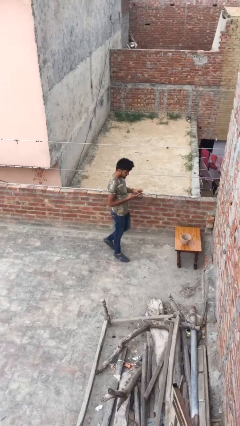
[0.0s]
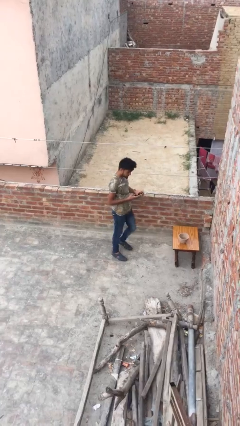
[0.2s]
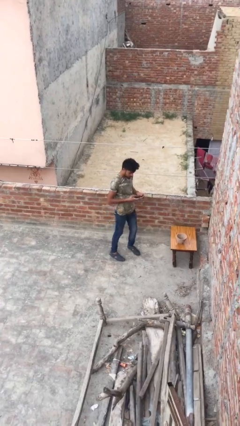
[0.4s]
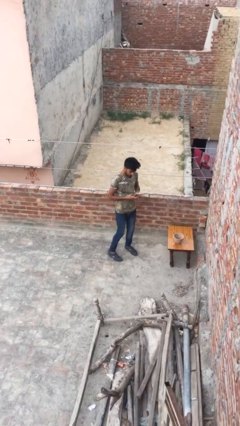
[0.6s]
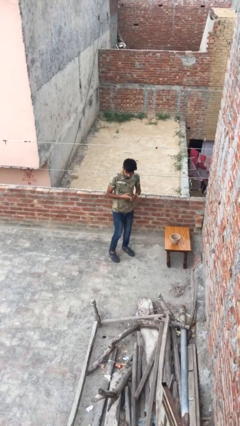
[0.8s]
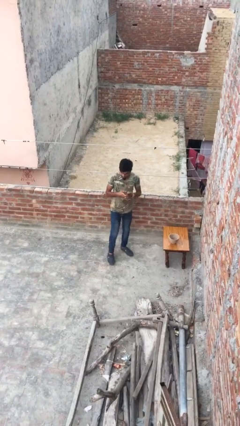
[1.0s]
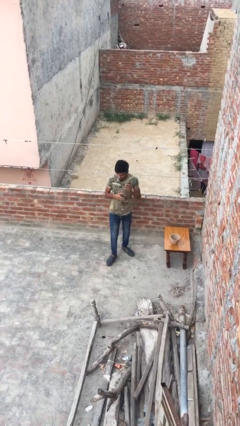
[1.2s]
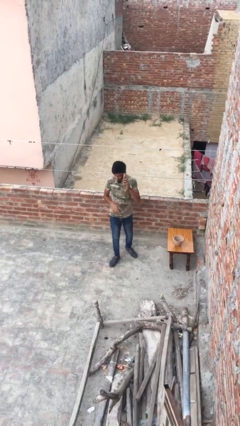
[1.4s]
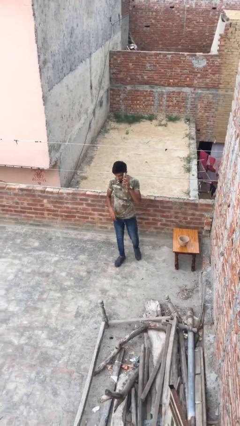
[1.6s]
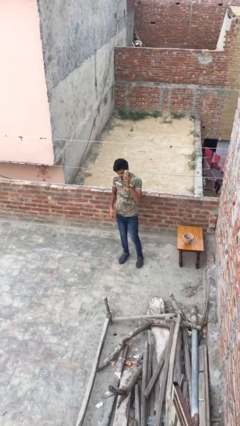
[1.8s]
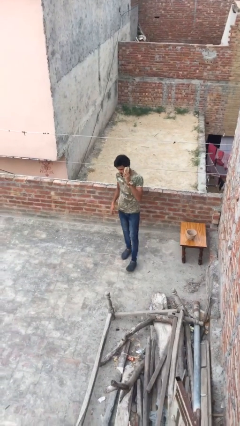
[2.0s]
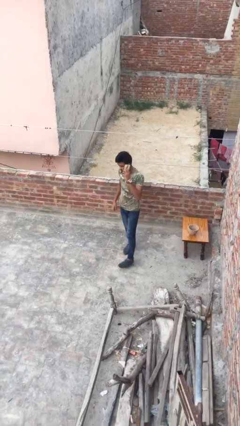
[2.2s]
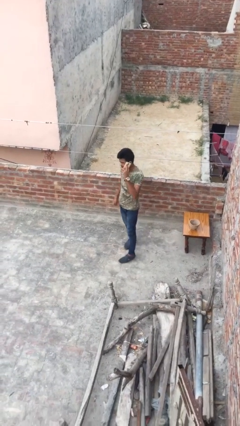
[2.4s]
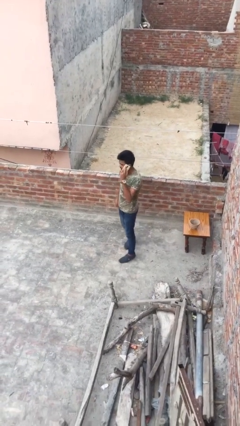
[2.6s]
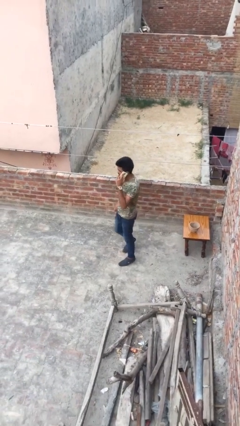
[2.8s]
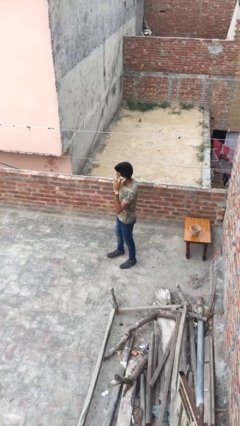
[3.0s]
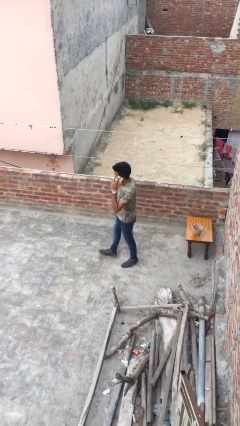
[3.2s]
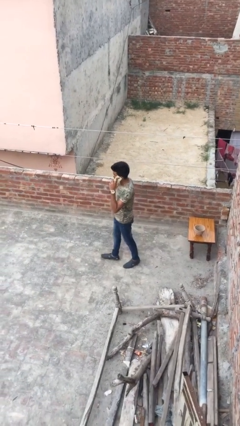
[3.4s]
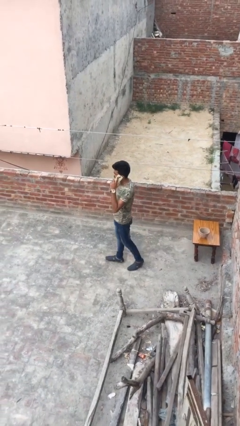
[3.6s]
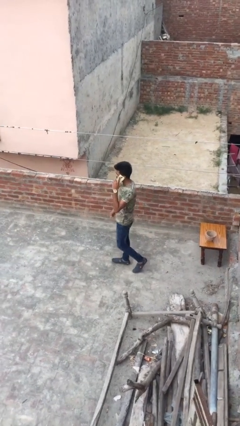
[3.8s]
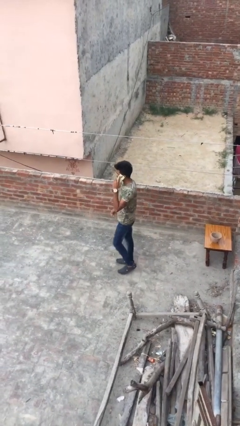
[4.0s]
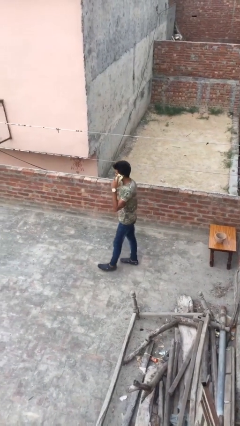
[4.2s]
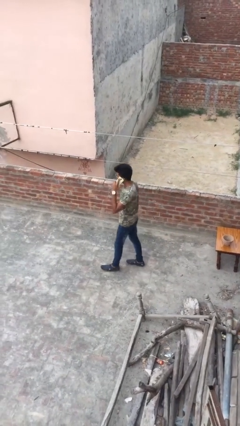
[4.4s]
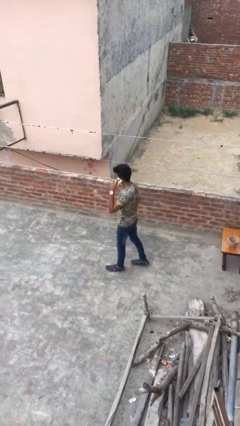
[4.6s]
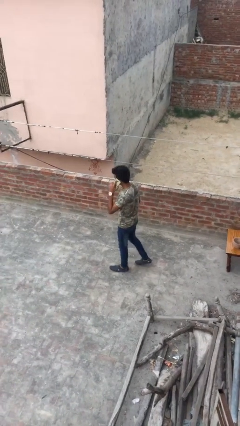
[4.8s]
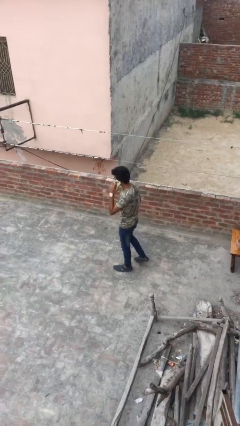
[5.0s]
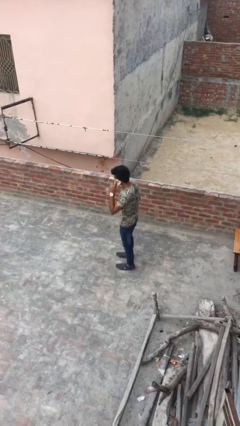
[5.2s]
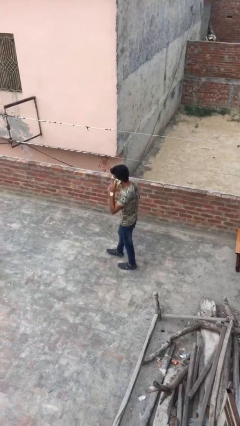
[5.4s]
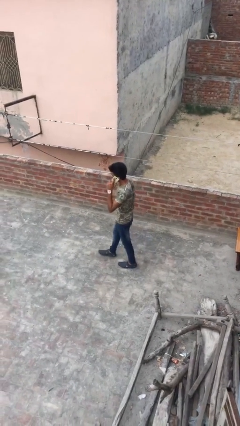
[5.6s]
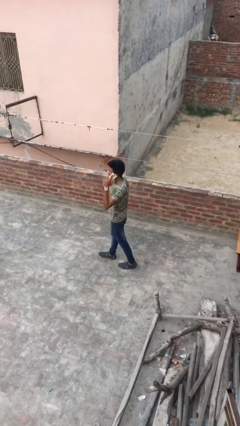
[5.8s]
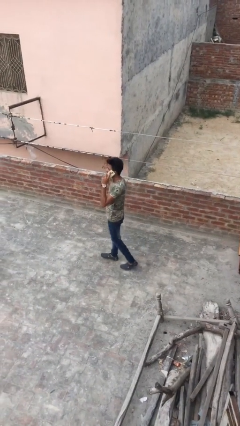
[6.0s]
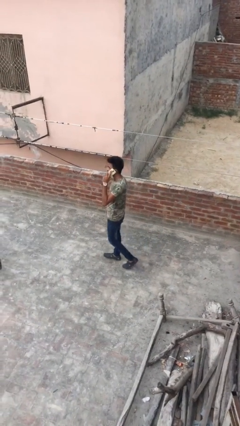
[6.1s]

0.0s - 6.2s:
person talks on phone

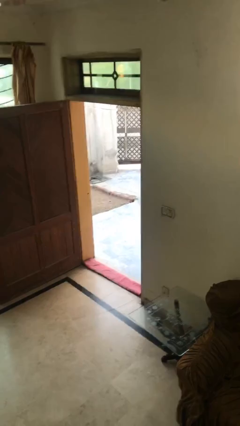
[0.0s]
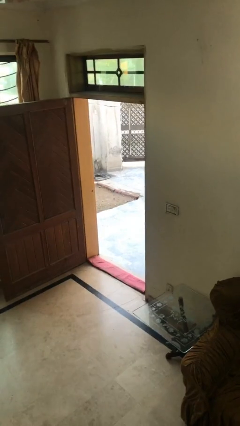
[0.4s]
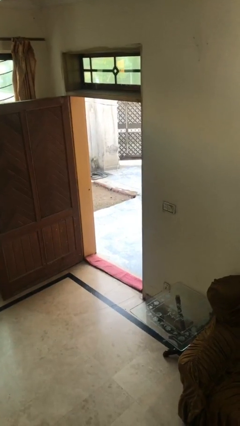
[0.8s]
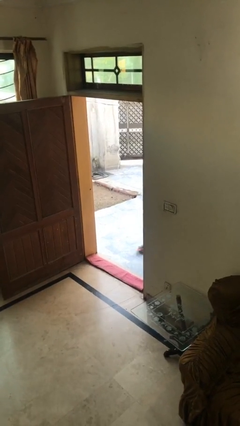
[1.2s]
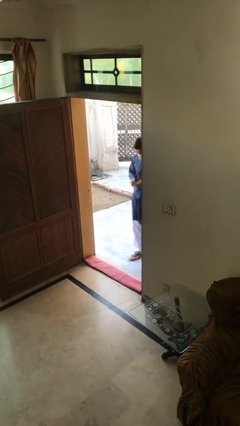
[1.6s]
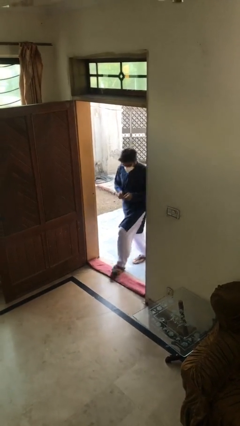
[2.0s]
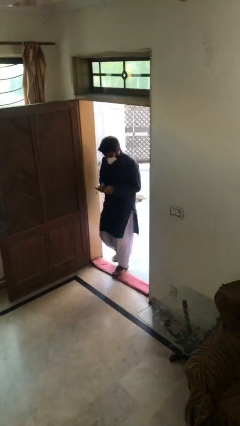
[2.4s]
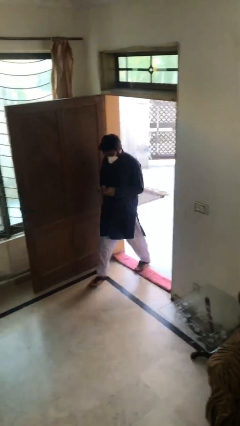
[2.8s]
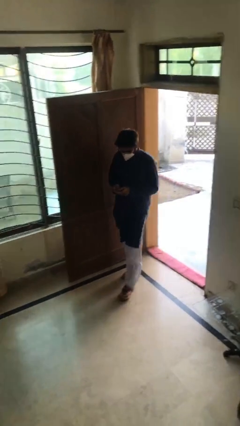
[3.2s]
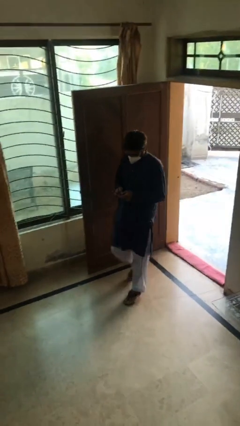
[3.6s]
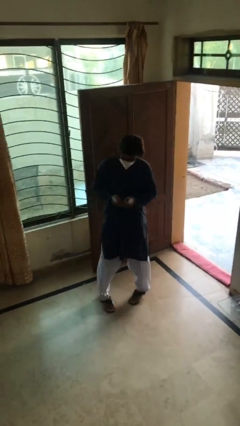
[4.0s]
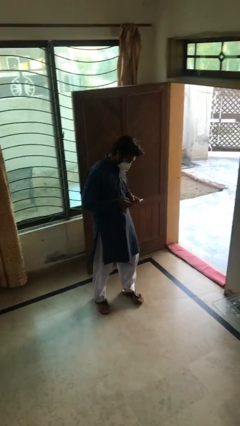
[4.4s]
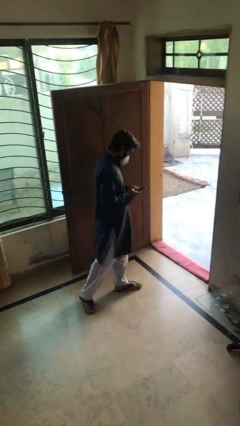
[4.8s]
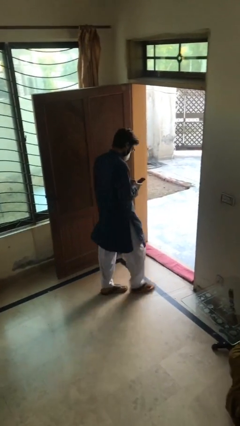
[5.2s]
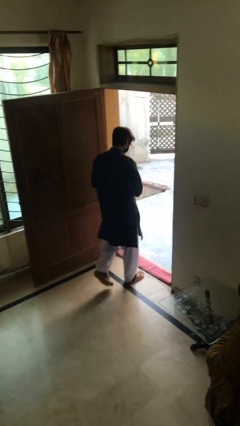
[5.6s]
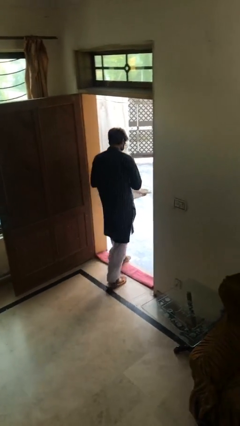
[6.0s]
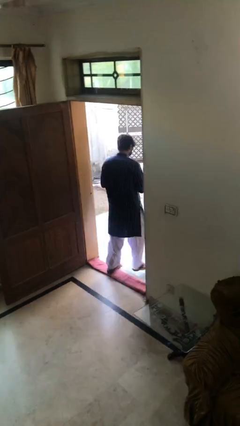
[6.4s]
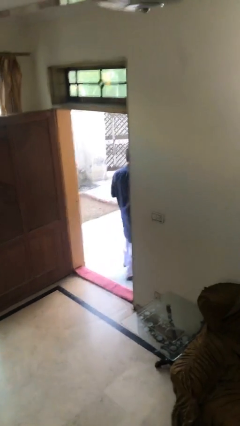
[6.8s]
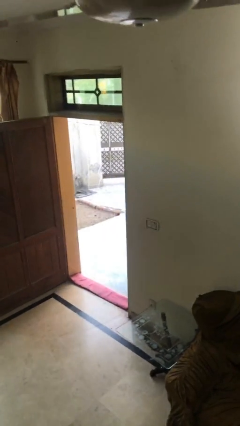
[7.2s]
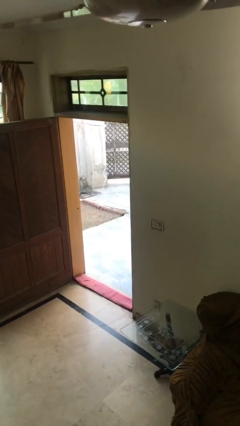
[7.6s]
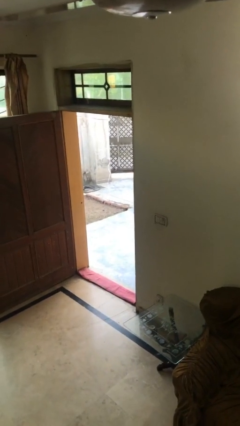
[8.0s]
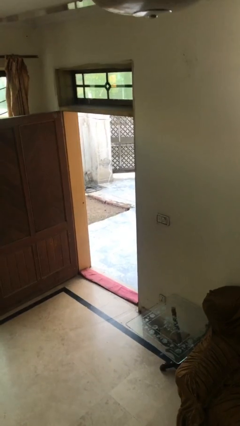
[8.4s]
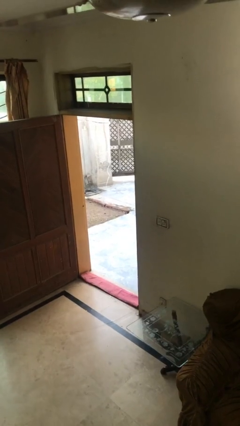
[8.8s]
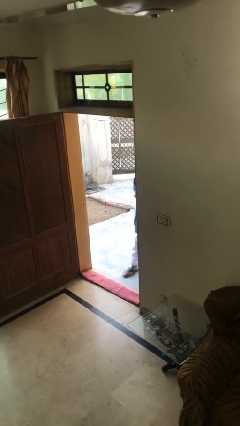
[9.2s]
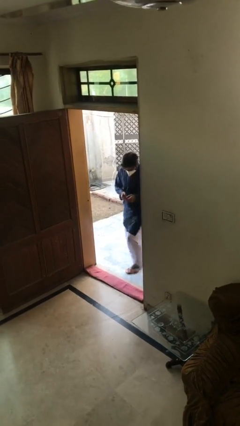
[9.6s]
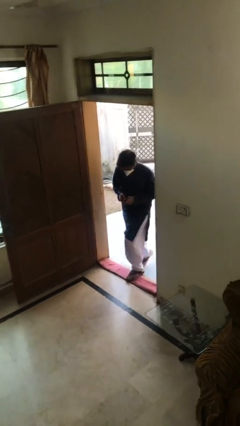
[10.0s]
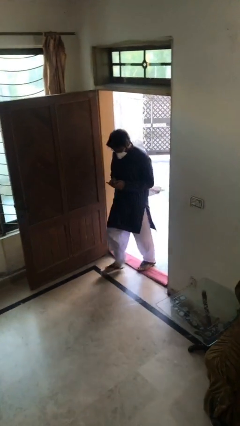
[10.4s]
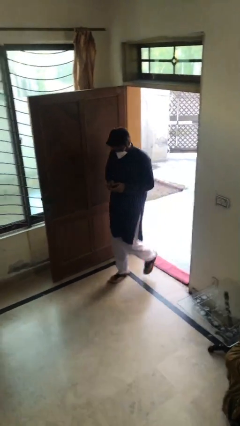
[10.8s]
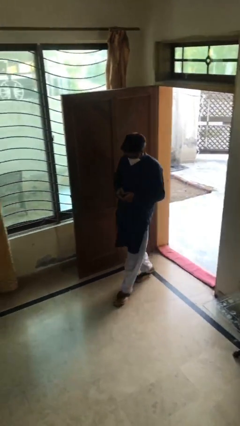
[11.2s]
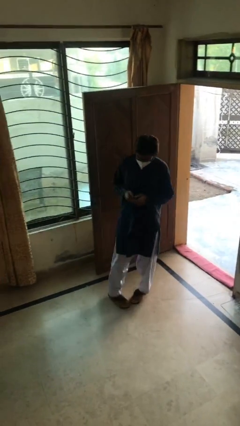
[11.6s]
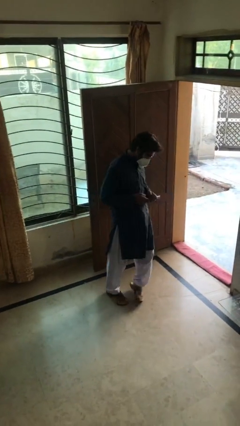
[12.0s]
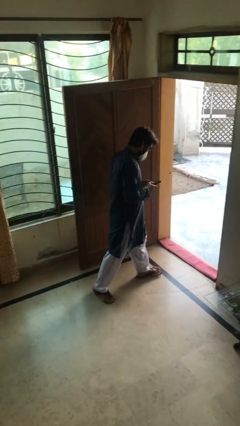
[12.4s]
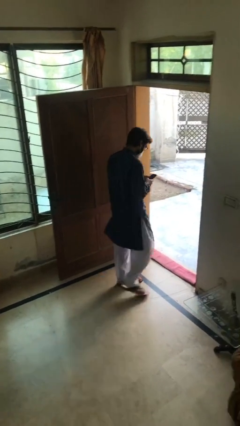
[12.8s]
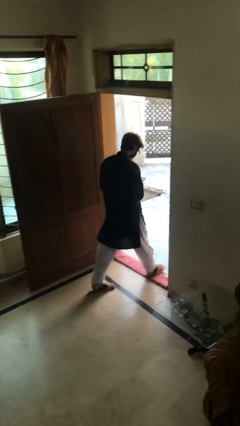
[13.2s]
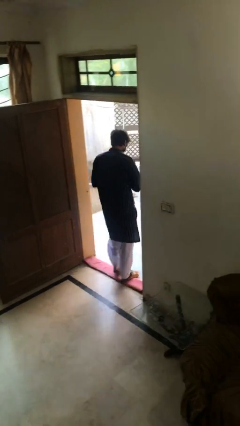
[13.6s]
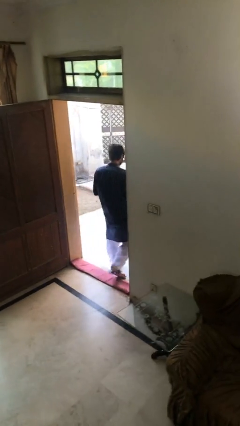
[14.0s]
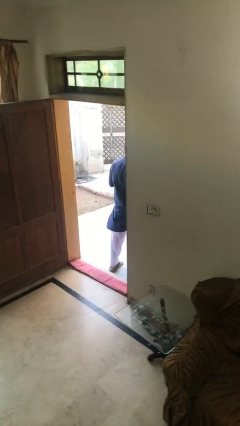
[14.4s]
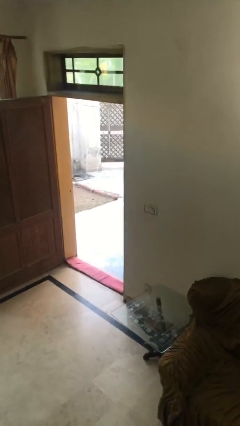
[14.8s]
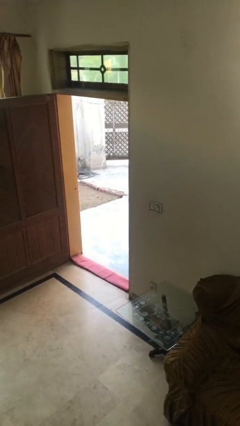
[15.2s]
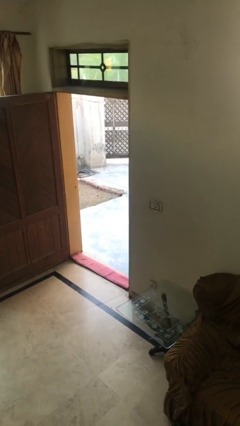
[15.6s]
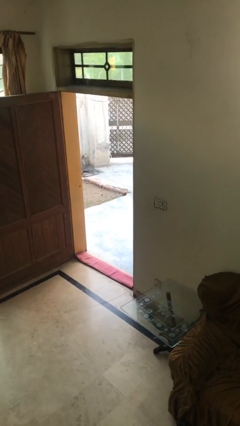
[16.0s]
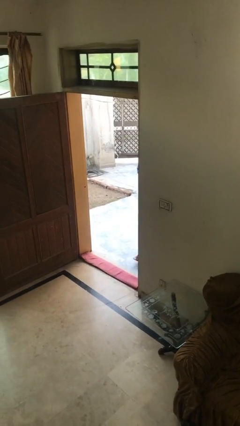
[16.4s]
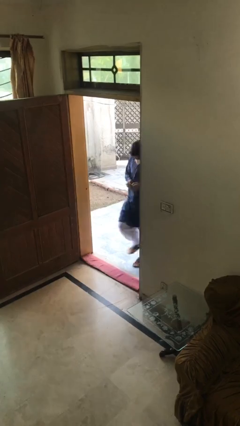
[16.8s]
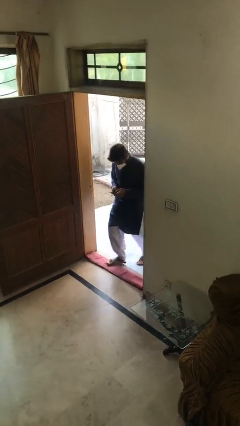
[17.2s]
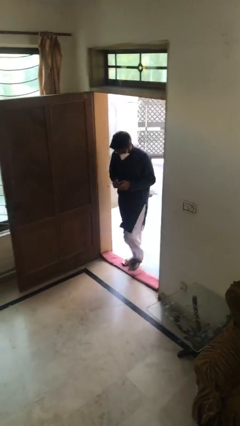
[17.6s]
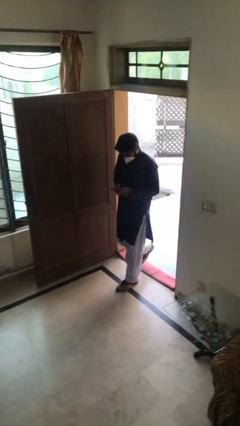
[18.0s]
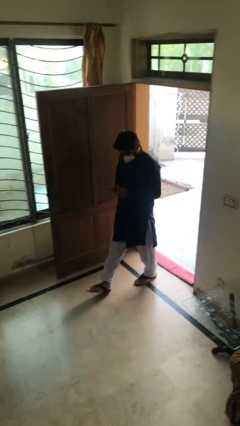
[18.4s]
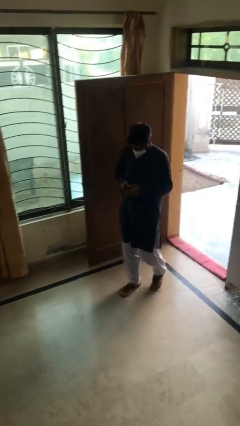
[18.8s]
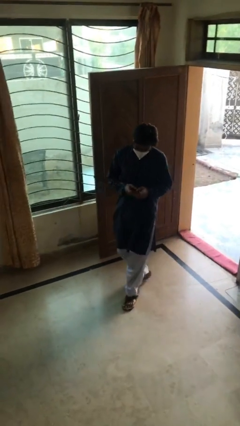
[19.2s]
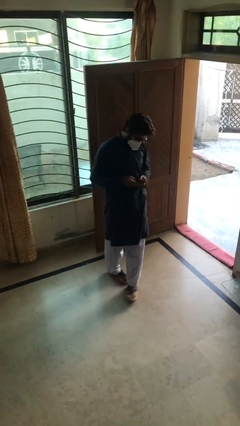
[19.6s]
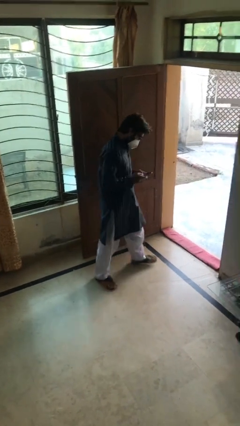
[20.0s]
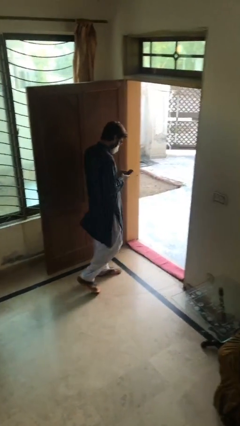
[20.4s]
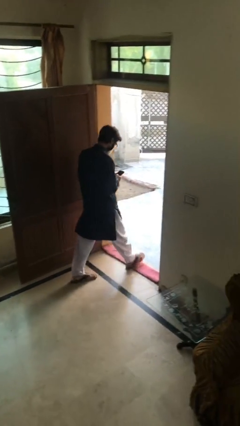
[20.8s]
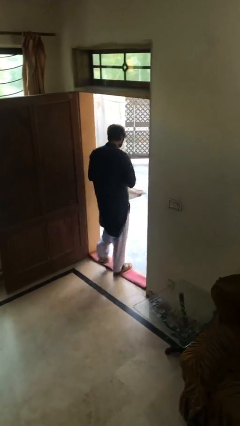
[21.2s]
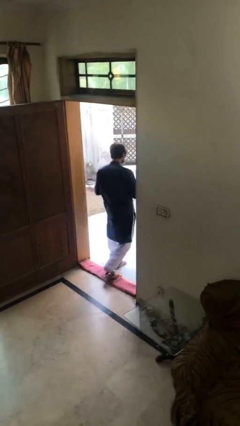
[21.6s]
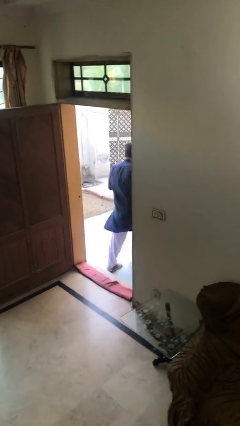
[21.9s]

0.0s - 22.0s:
person texts on phone

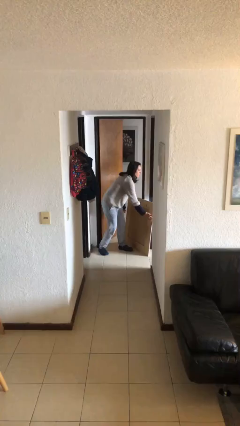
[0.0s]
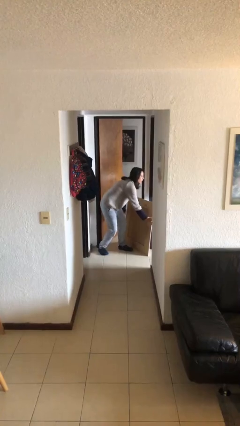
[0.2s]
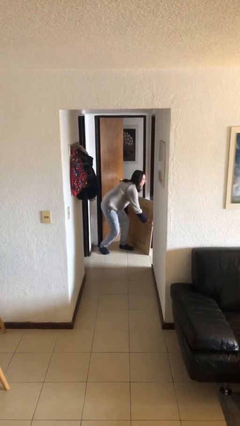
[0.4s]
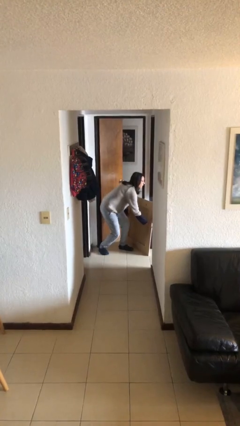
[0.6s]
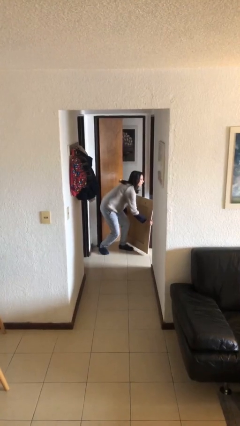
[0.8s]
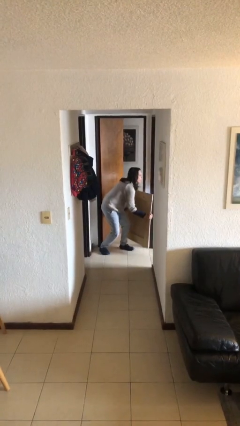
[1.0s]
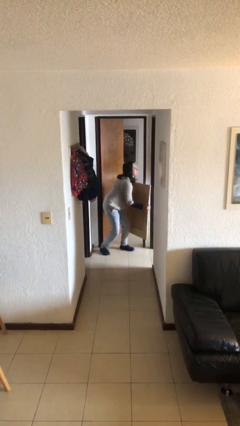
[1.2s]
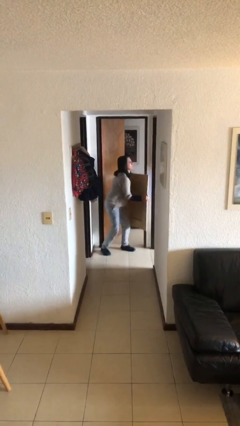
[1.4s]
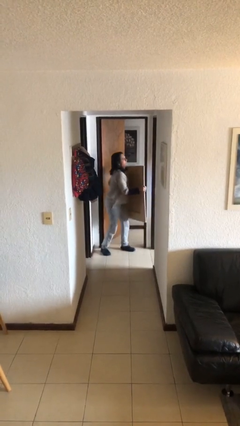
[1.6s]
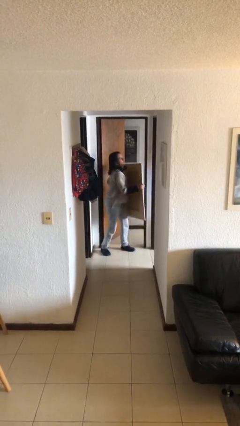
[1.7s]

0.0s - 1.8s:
person picks up object from floor
